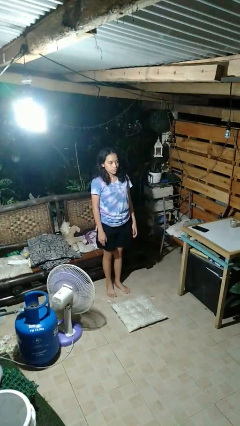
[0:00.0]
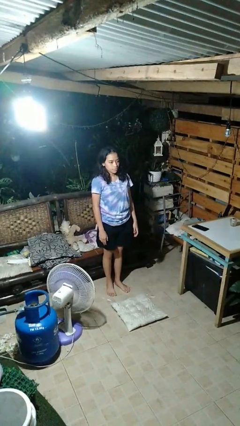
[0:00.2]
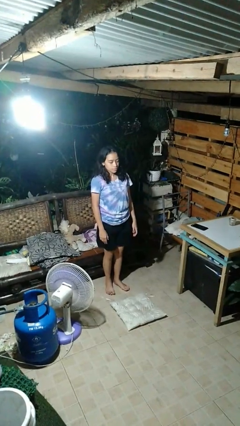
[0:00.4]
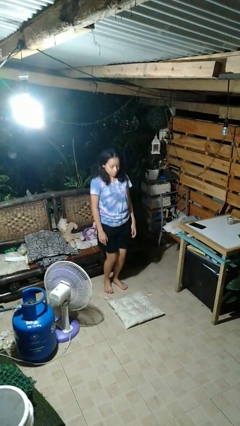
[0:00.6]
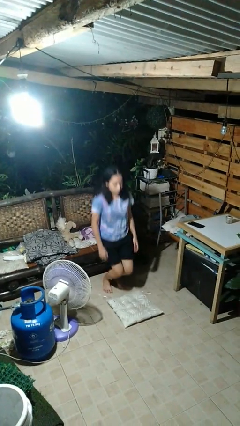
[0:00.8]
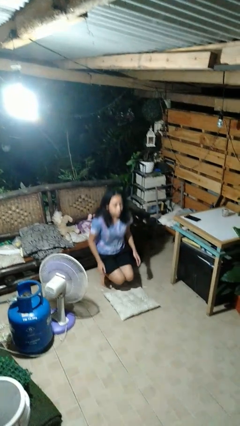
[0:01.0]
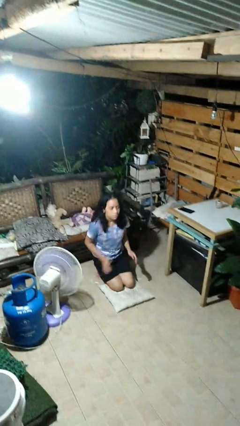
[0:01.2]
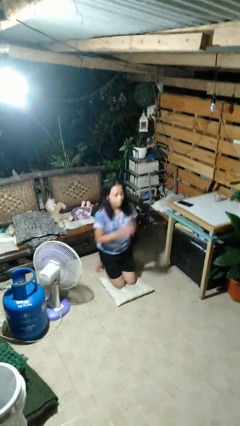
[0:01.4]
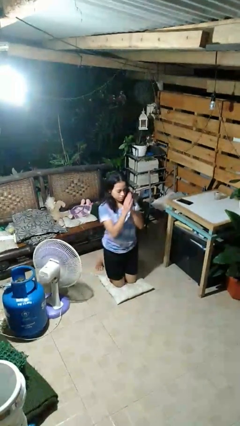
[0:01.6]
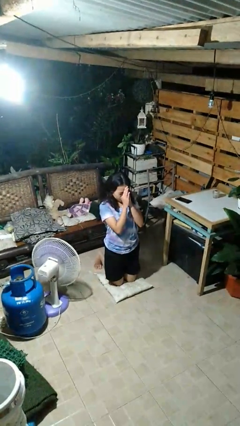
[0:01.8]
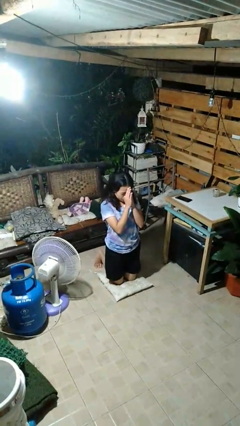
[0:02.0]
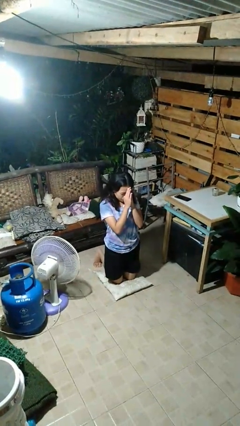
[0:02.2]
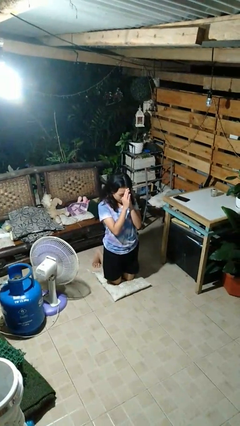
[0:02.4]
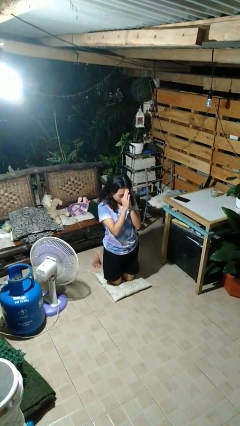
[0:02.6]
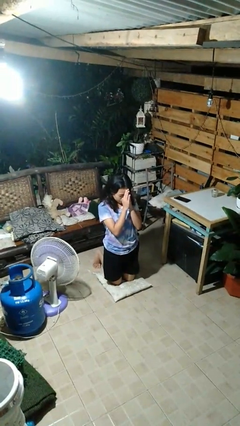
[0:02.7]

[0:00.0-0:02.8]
person prays

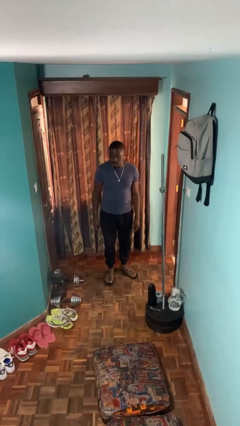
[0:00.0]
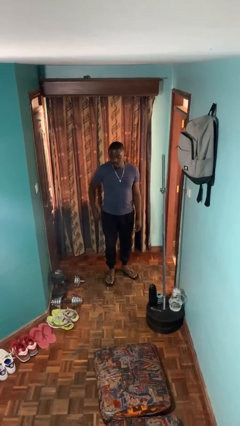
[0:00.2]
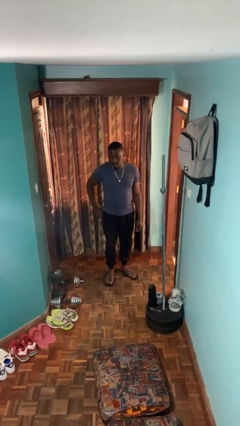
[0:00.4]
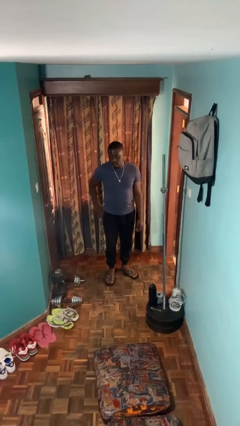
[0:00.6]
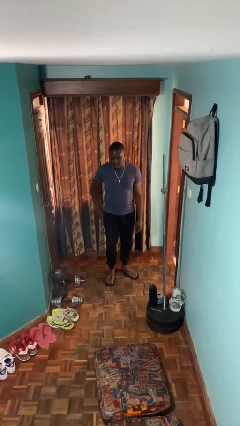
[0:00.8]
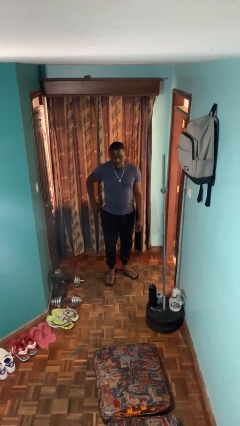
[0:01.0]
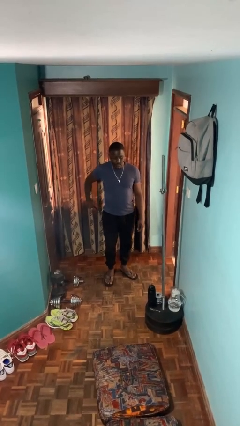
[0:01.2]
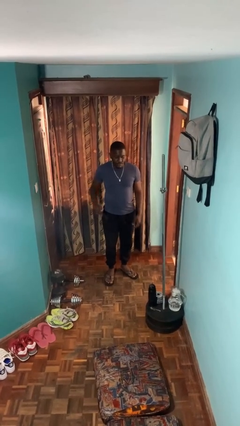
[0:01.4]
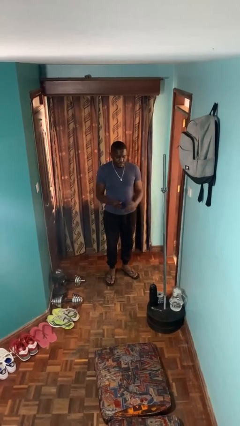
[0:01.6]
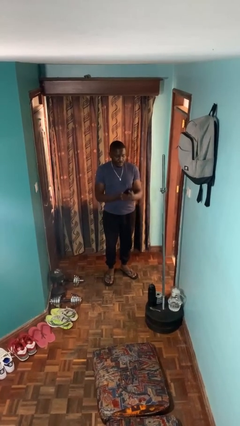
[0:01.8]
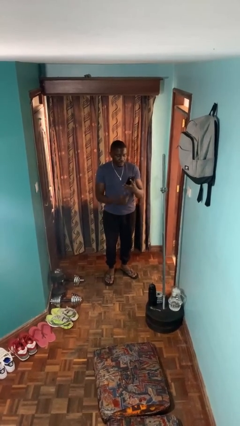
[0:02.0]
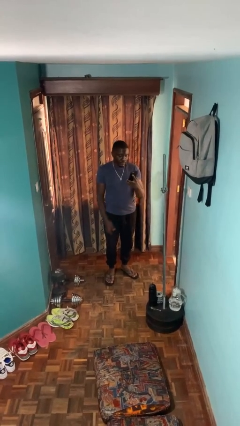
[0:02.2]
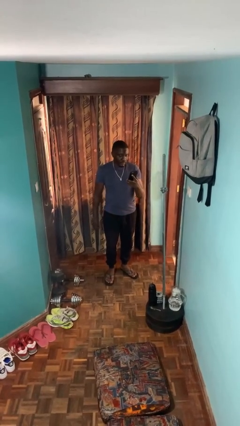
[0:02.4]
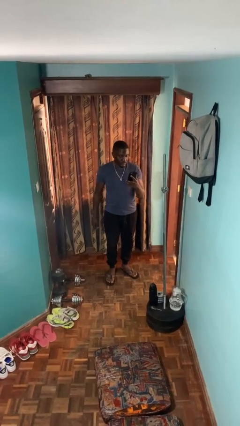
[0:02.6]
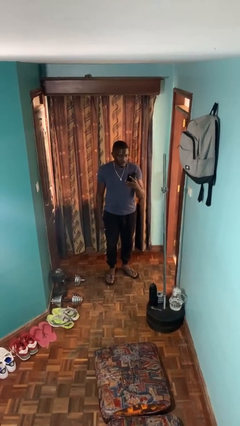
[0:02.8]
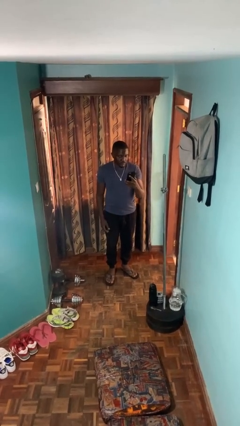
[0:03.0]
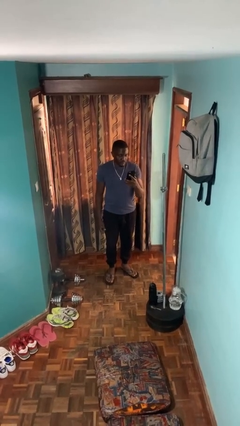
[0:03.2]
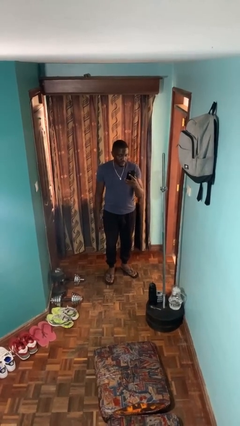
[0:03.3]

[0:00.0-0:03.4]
person takes phone from pocket

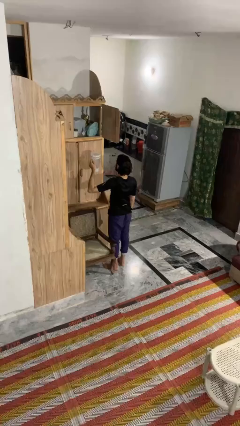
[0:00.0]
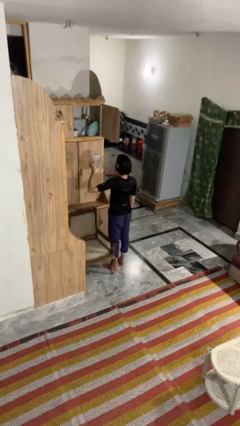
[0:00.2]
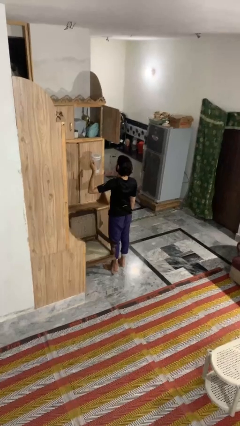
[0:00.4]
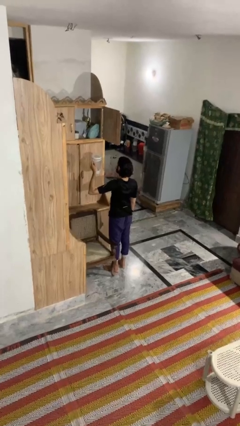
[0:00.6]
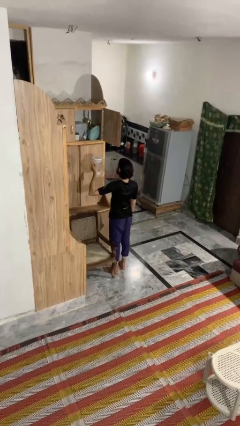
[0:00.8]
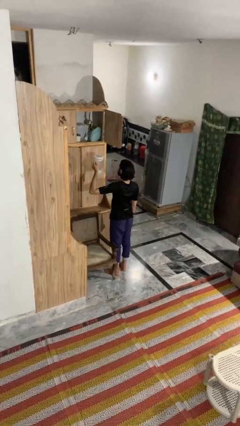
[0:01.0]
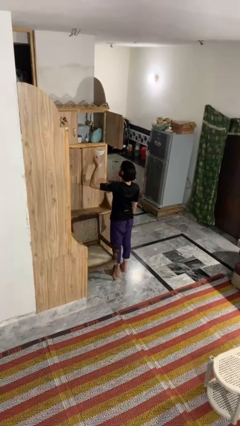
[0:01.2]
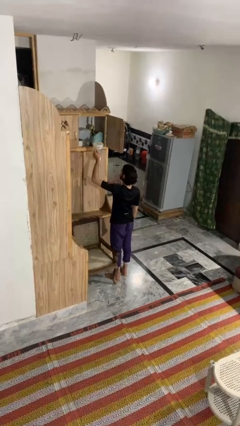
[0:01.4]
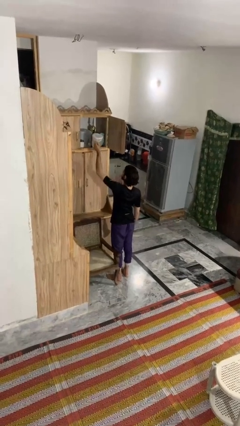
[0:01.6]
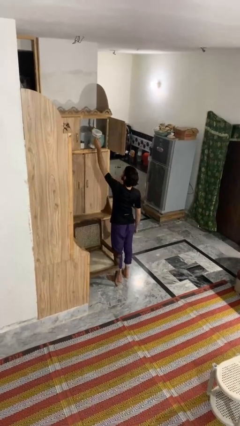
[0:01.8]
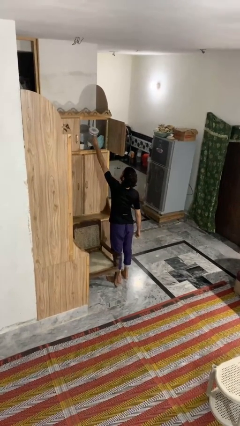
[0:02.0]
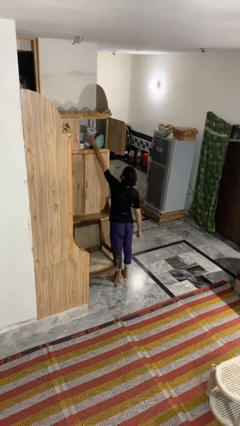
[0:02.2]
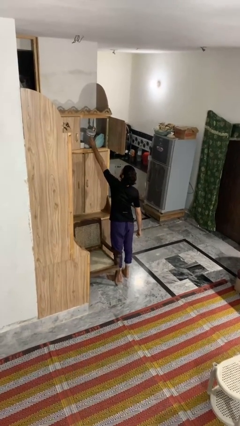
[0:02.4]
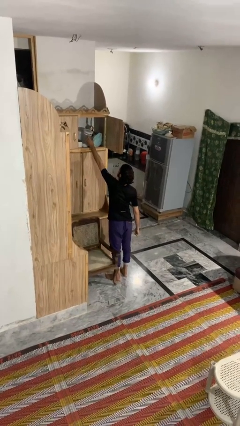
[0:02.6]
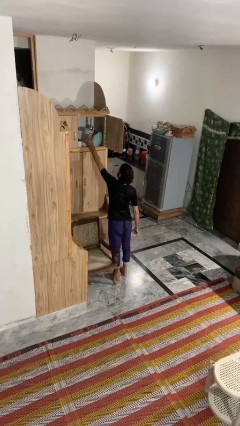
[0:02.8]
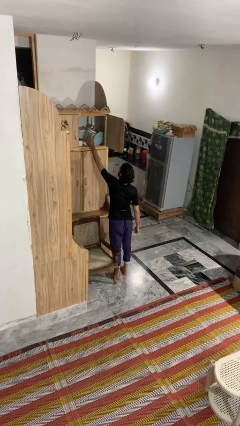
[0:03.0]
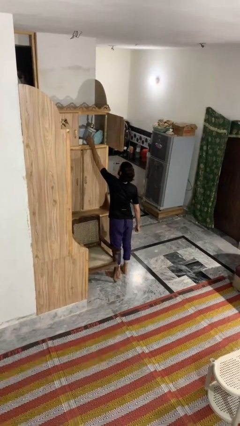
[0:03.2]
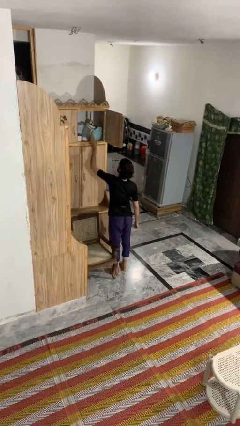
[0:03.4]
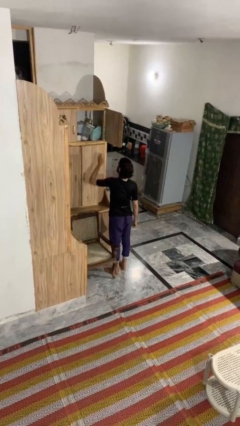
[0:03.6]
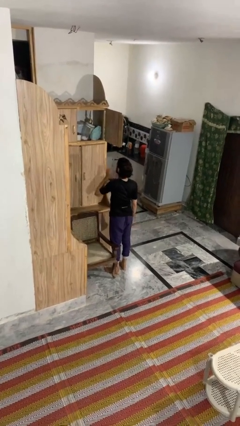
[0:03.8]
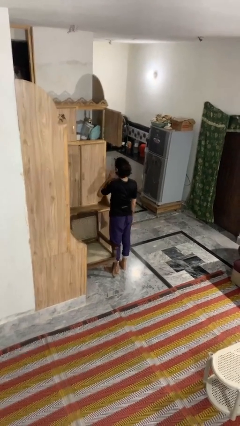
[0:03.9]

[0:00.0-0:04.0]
person puts down object on shelf

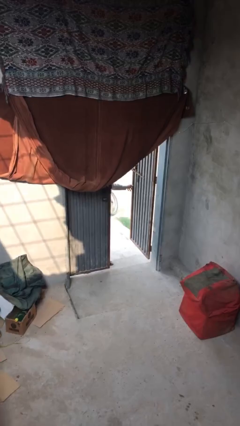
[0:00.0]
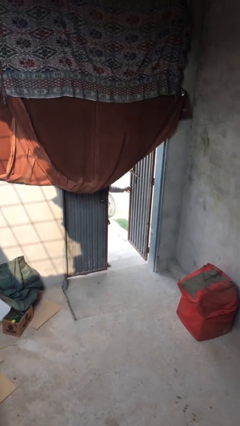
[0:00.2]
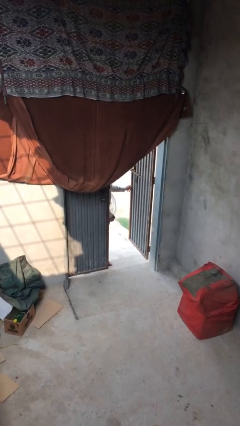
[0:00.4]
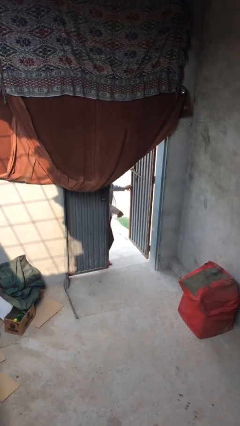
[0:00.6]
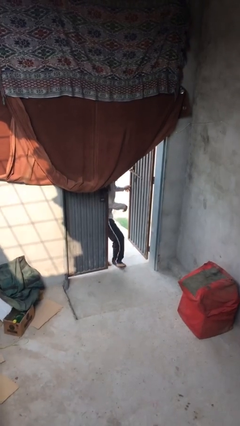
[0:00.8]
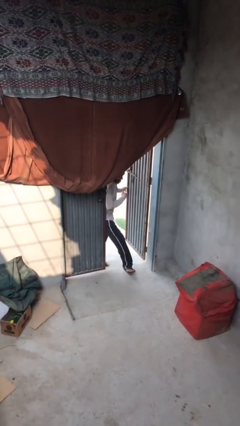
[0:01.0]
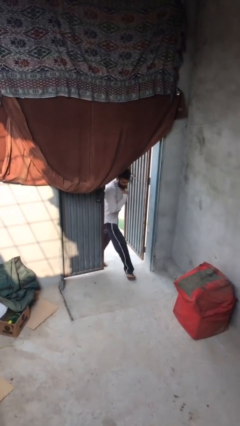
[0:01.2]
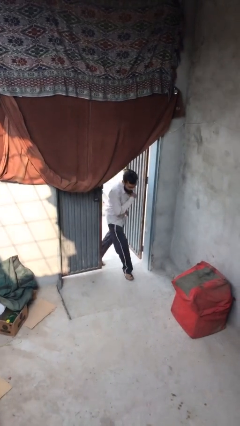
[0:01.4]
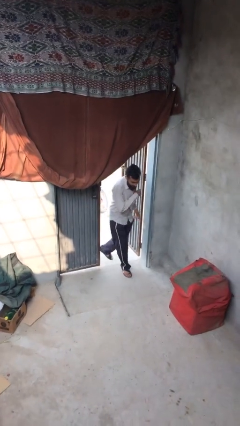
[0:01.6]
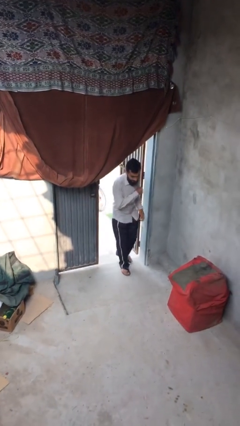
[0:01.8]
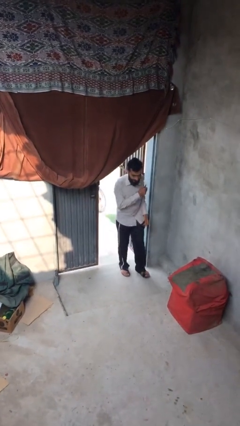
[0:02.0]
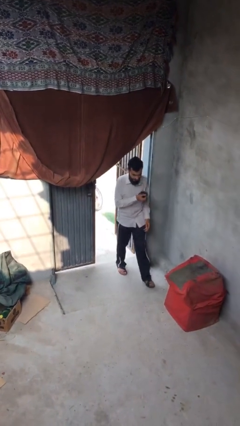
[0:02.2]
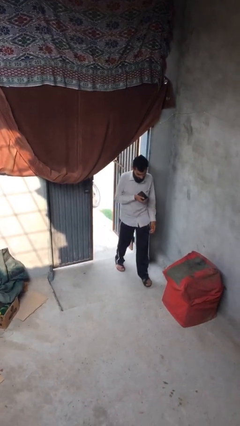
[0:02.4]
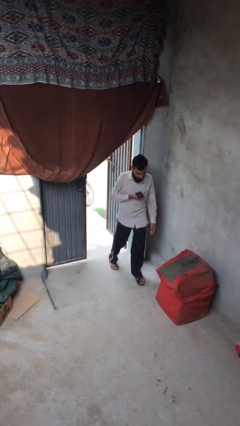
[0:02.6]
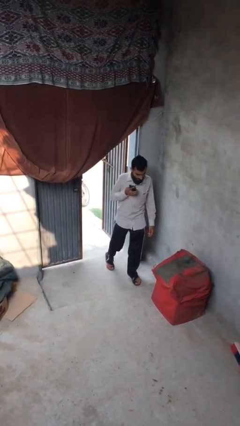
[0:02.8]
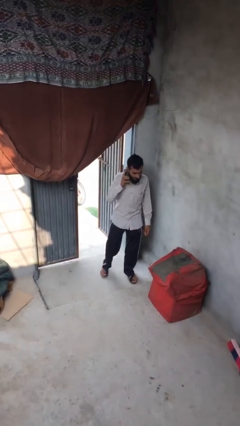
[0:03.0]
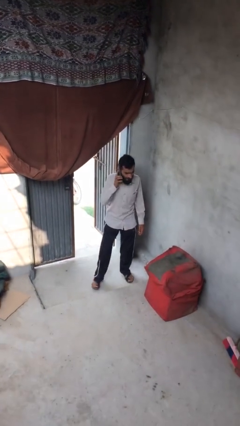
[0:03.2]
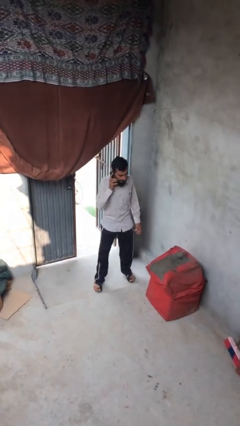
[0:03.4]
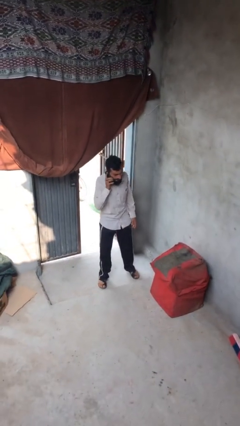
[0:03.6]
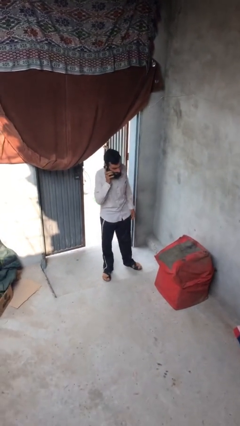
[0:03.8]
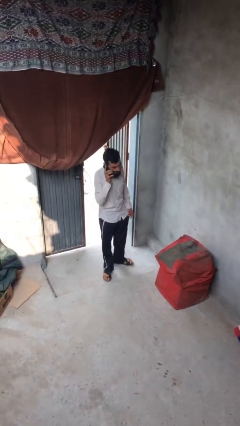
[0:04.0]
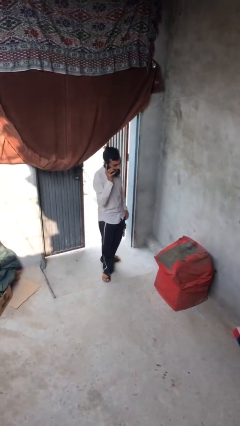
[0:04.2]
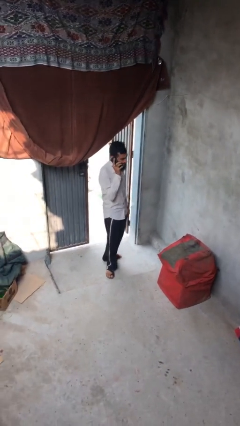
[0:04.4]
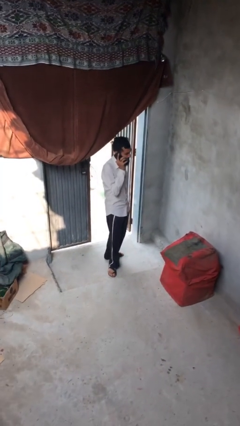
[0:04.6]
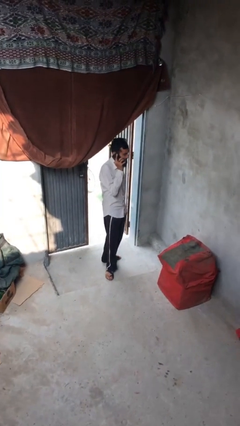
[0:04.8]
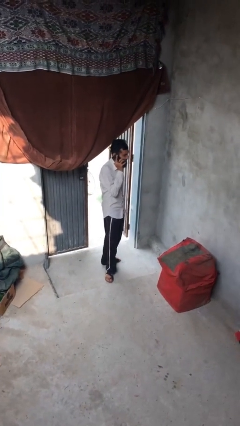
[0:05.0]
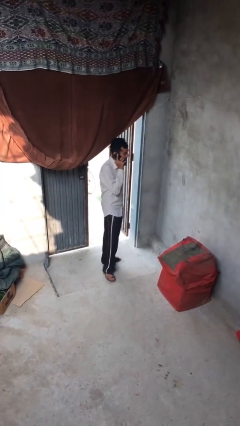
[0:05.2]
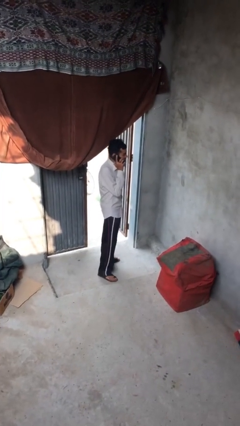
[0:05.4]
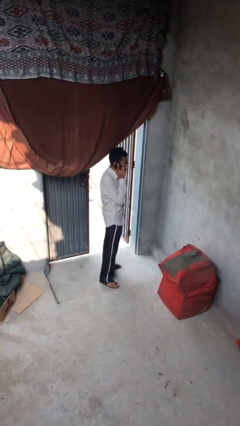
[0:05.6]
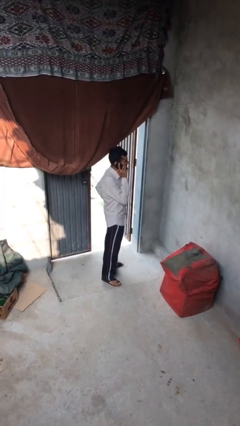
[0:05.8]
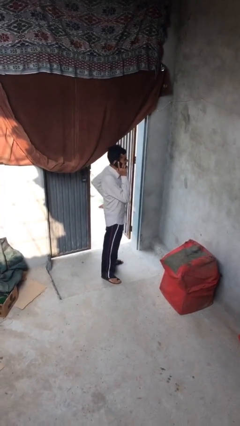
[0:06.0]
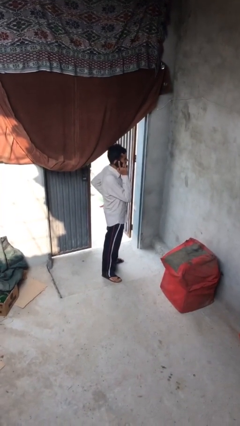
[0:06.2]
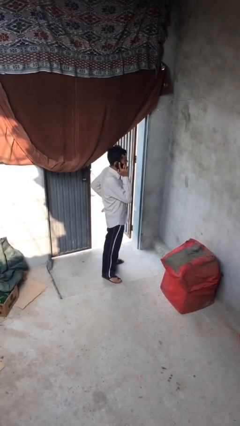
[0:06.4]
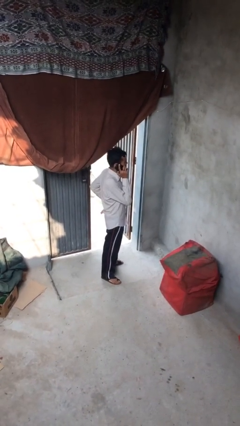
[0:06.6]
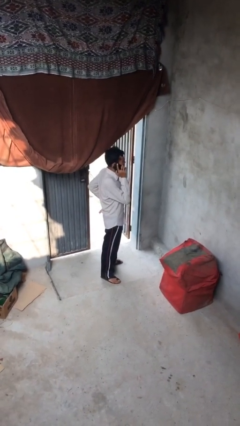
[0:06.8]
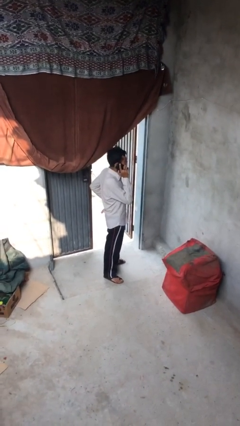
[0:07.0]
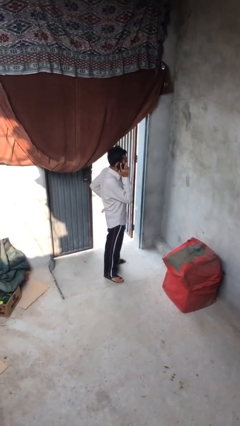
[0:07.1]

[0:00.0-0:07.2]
person enters scene through structure

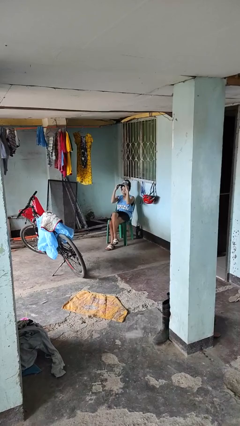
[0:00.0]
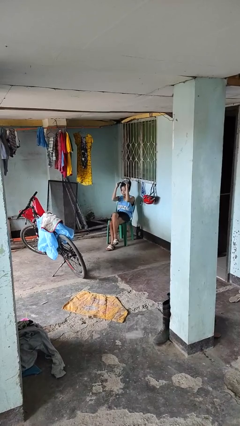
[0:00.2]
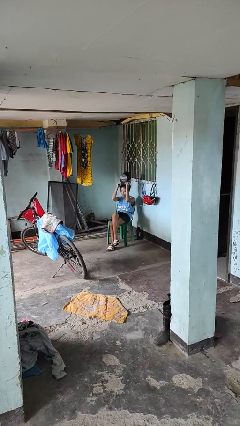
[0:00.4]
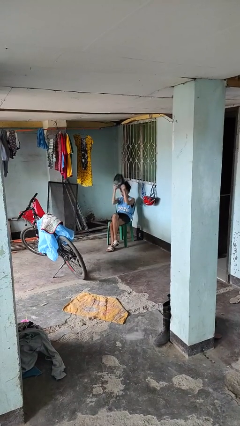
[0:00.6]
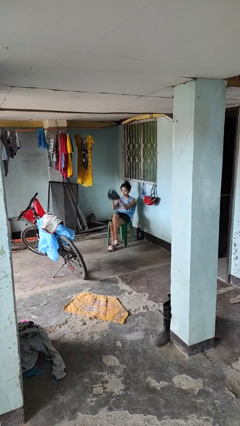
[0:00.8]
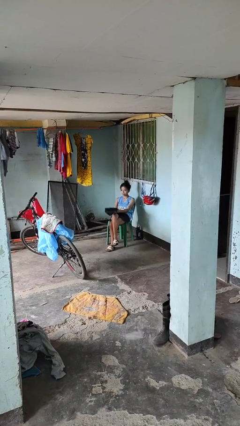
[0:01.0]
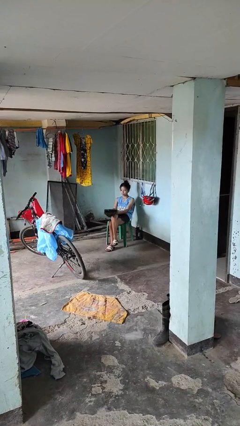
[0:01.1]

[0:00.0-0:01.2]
person takes off hat
